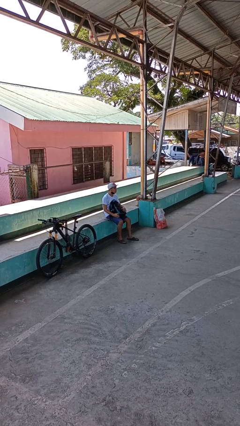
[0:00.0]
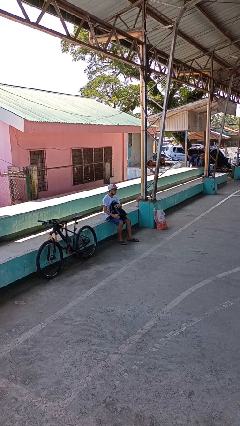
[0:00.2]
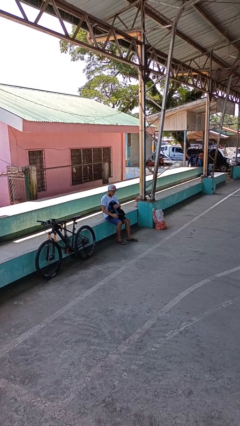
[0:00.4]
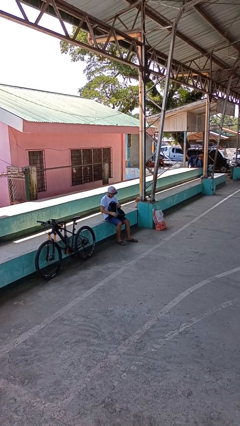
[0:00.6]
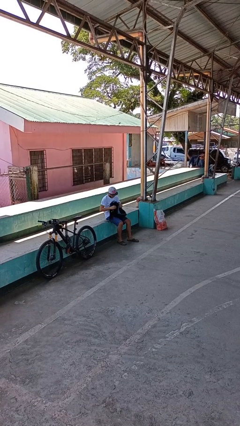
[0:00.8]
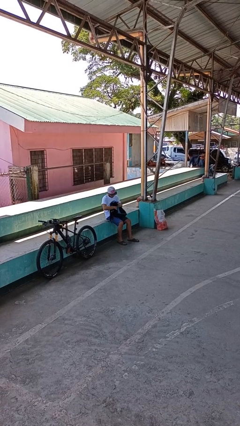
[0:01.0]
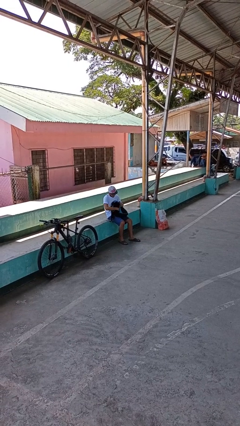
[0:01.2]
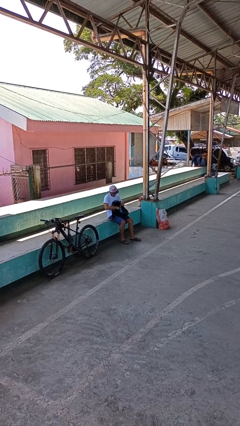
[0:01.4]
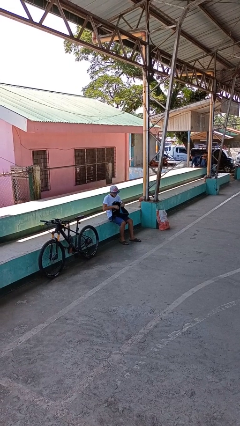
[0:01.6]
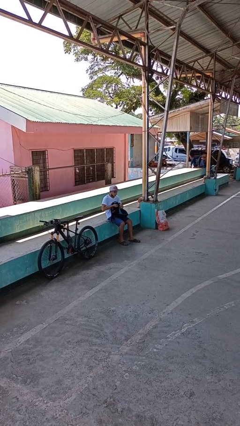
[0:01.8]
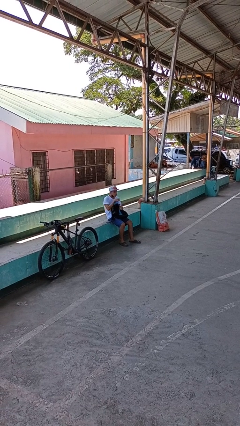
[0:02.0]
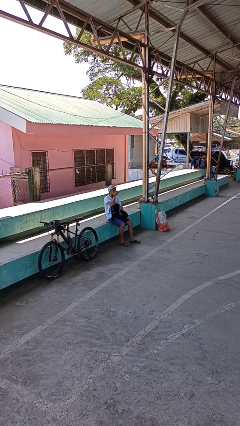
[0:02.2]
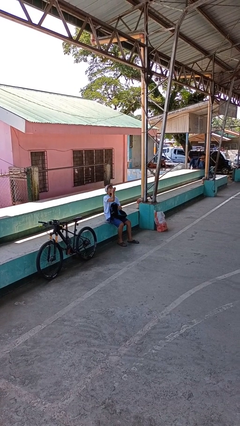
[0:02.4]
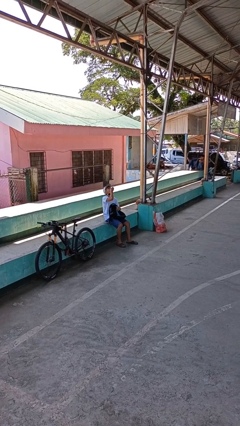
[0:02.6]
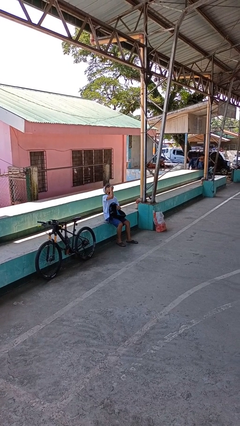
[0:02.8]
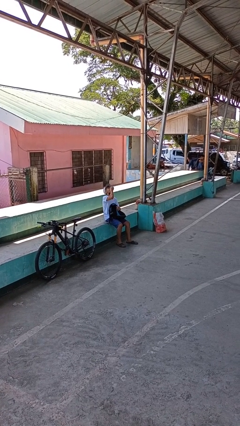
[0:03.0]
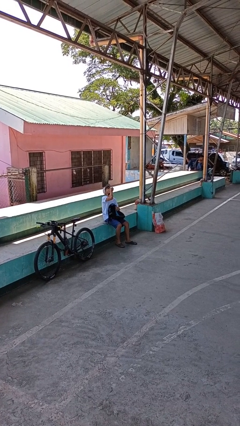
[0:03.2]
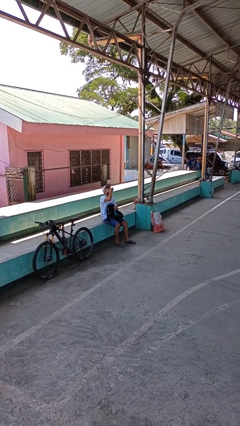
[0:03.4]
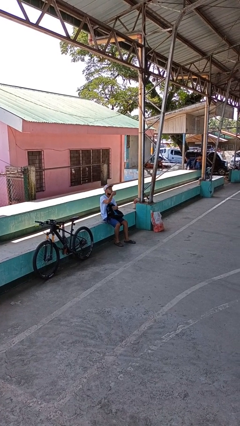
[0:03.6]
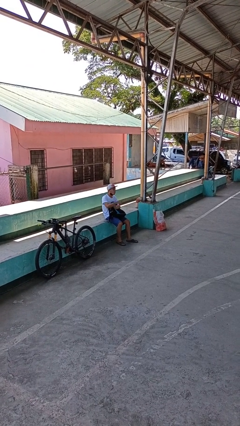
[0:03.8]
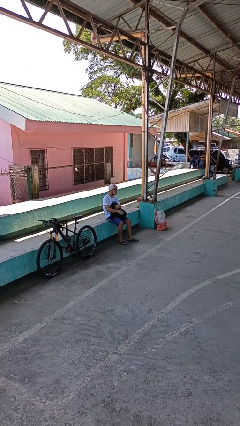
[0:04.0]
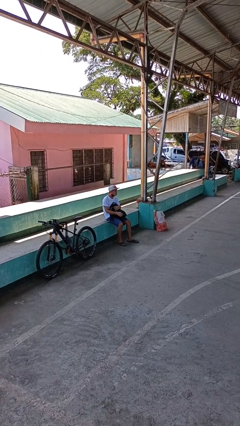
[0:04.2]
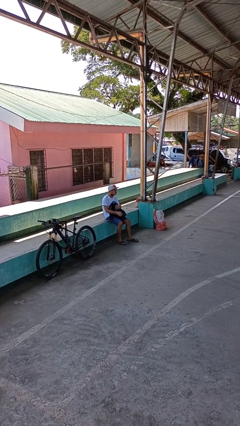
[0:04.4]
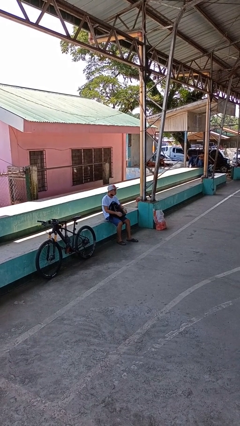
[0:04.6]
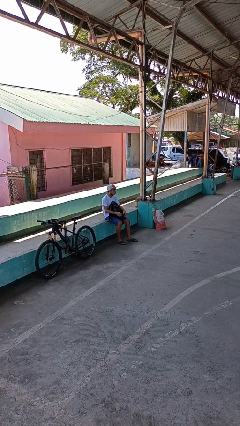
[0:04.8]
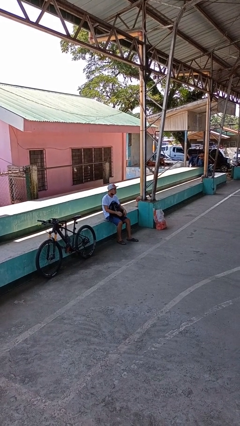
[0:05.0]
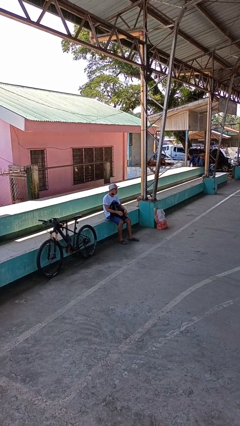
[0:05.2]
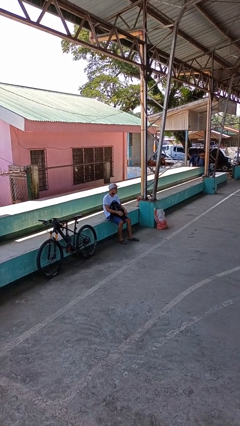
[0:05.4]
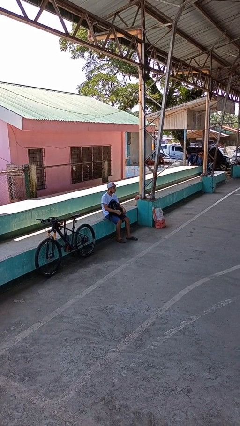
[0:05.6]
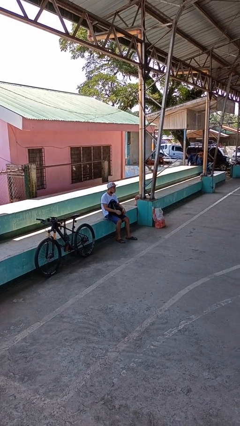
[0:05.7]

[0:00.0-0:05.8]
person eats snack from bag

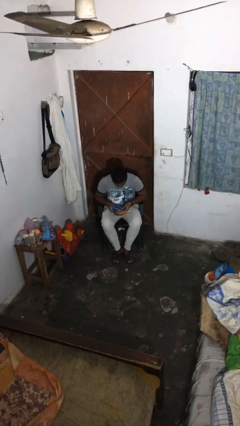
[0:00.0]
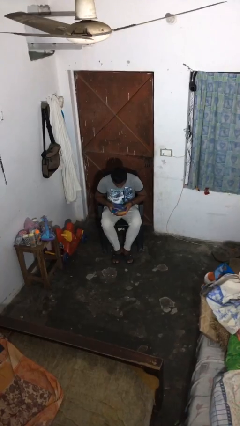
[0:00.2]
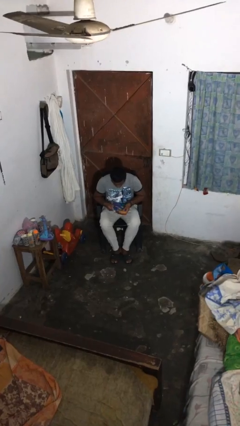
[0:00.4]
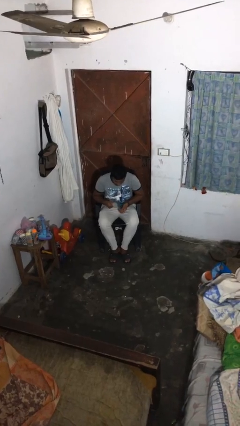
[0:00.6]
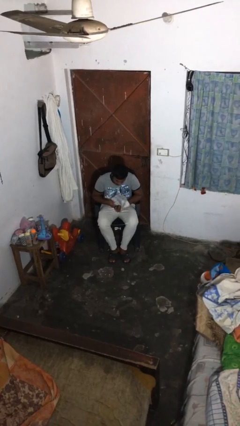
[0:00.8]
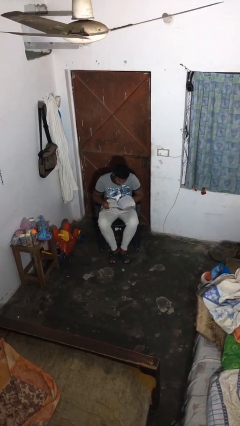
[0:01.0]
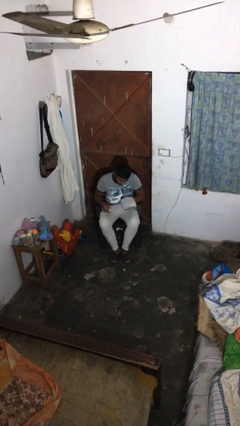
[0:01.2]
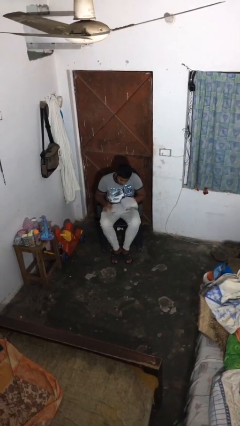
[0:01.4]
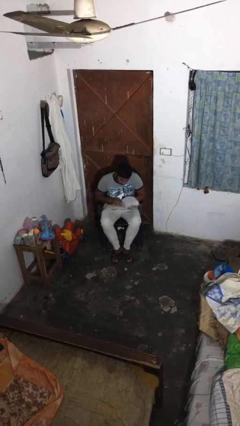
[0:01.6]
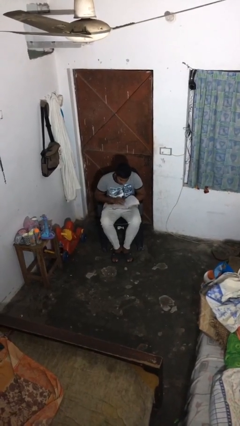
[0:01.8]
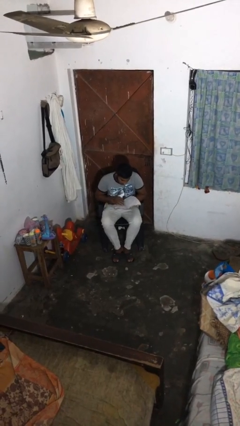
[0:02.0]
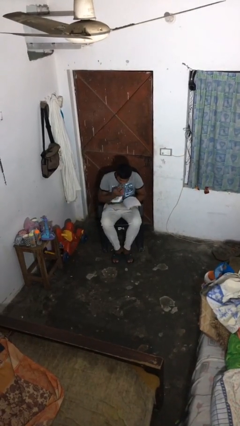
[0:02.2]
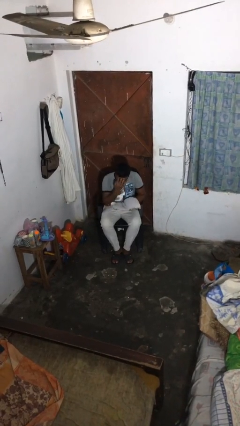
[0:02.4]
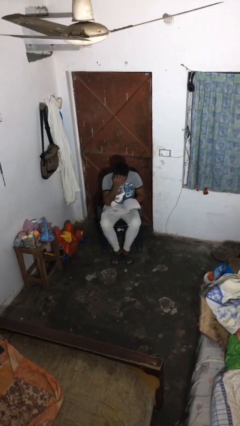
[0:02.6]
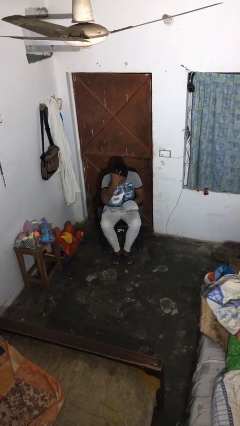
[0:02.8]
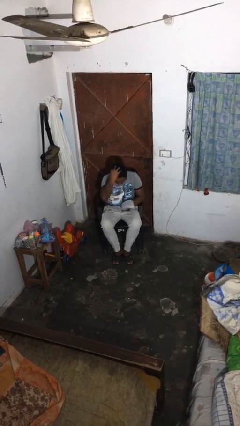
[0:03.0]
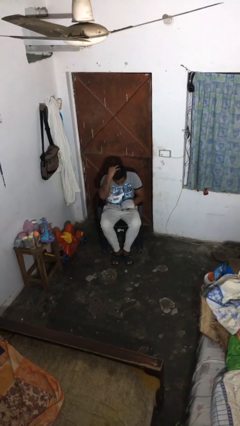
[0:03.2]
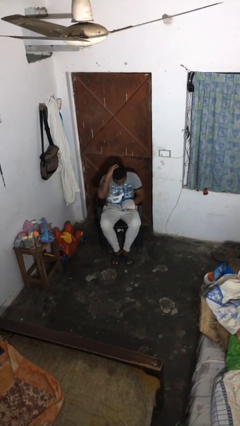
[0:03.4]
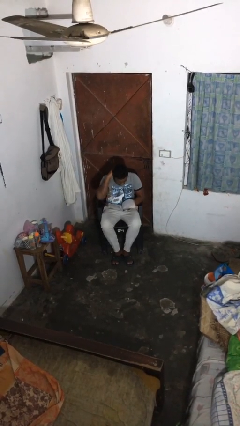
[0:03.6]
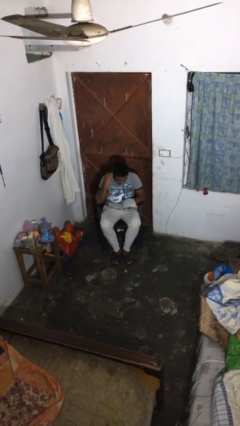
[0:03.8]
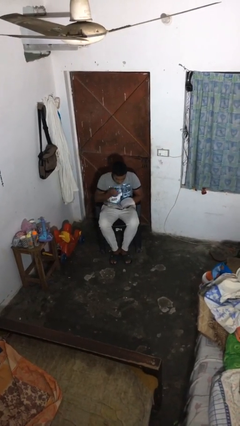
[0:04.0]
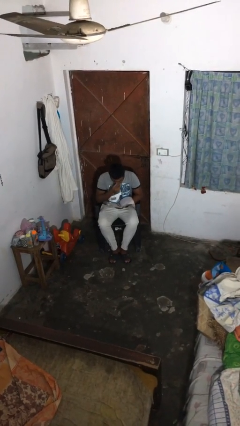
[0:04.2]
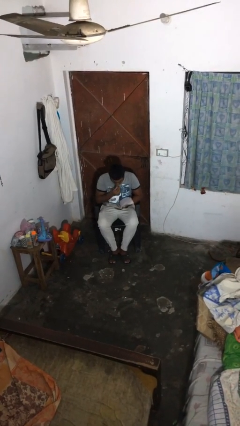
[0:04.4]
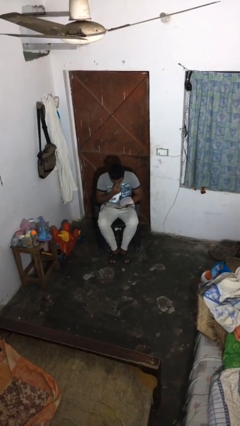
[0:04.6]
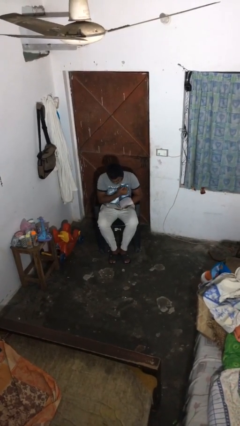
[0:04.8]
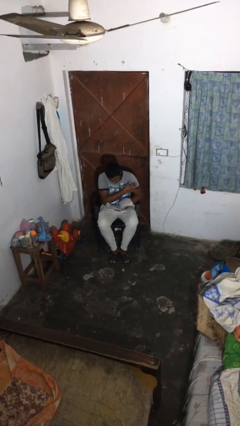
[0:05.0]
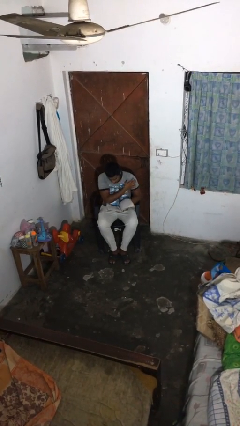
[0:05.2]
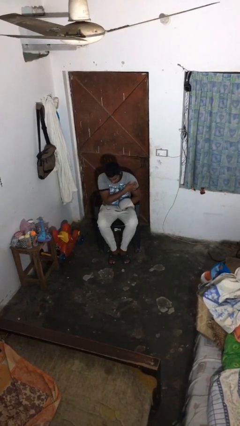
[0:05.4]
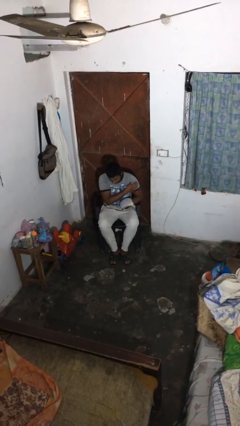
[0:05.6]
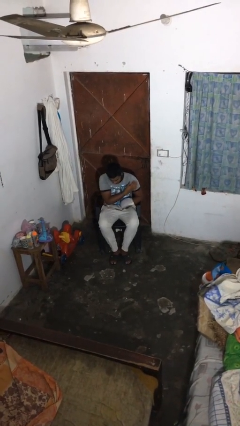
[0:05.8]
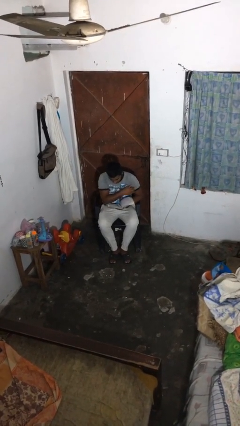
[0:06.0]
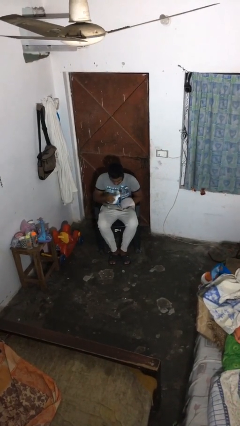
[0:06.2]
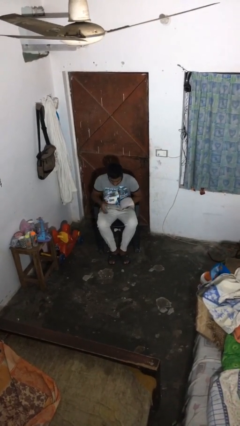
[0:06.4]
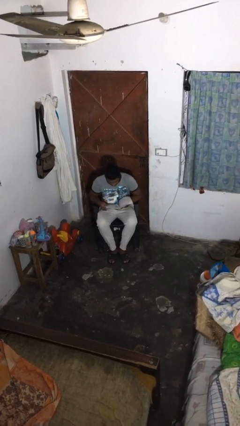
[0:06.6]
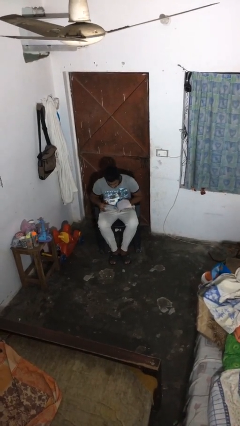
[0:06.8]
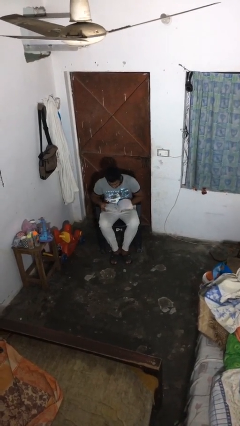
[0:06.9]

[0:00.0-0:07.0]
person reads document

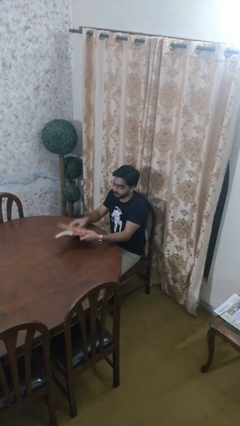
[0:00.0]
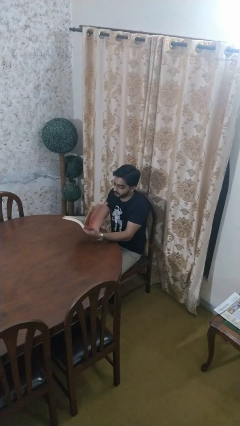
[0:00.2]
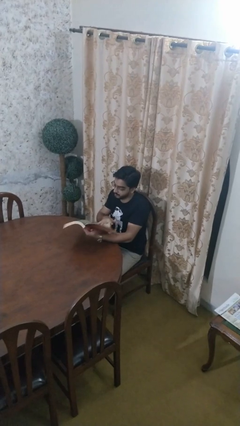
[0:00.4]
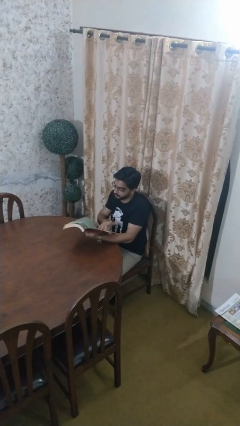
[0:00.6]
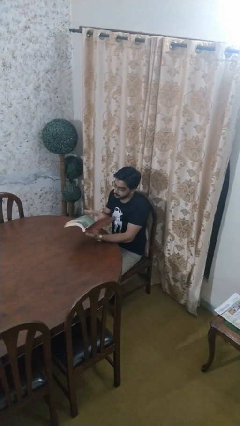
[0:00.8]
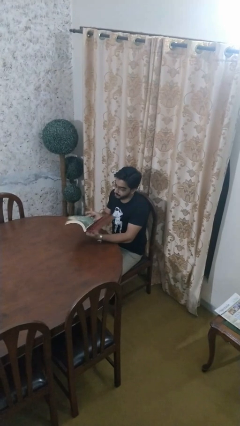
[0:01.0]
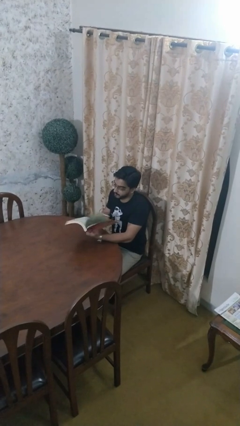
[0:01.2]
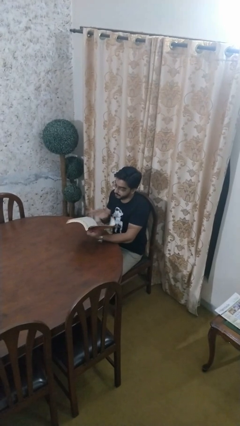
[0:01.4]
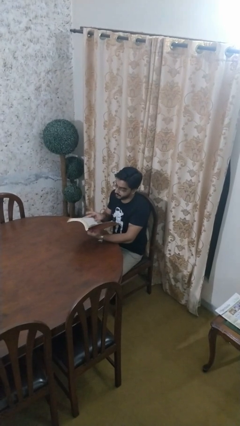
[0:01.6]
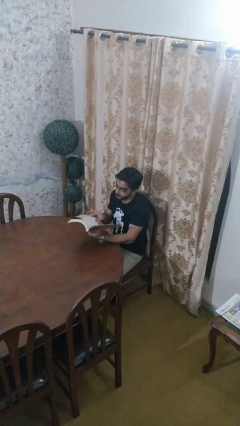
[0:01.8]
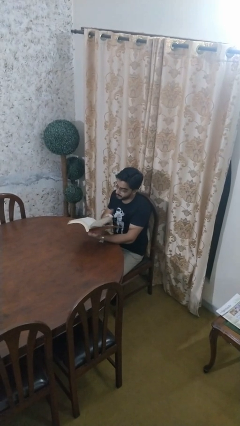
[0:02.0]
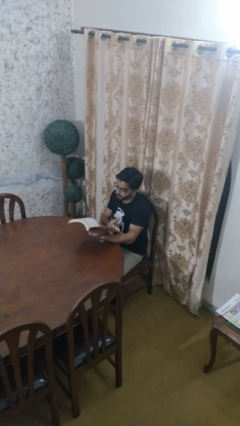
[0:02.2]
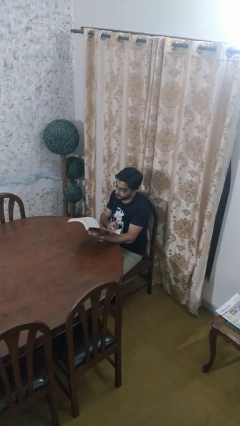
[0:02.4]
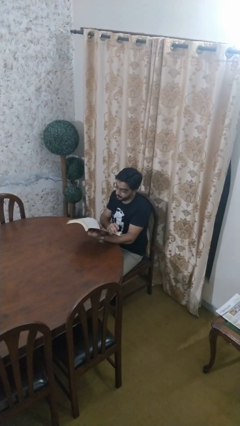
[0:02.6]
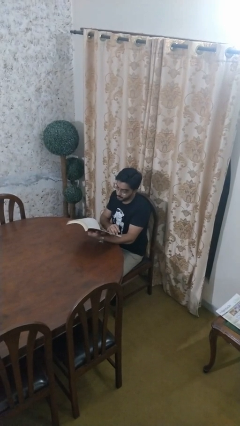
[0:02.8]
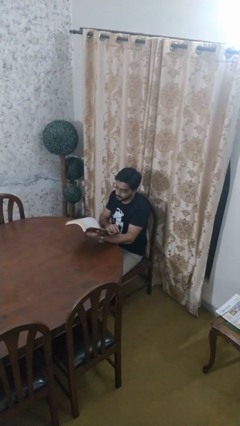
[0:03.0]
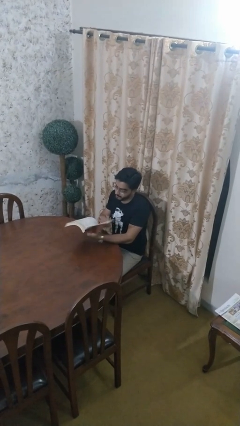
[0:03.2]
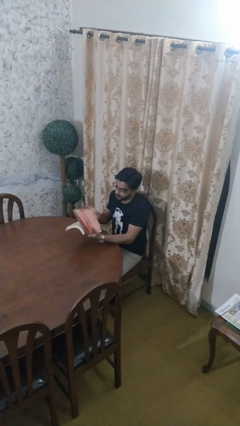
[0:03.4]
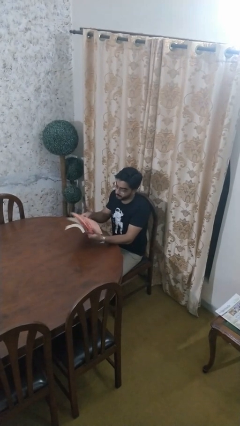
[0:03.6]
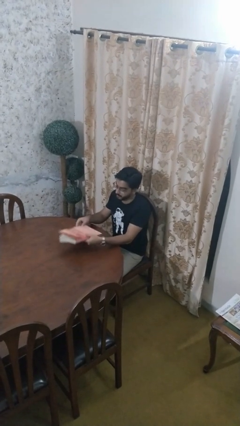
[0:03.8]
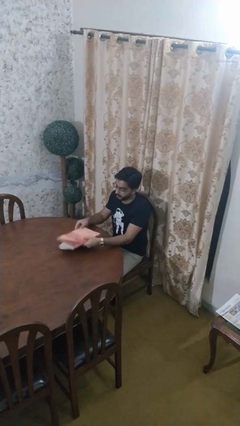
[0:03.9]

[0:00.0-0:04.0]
person reads book

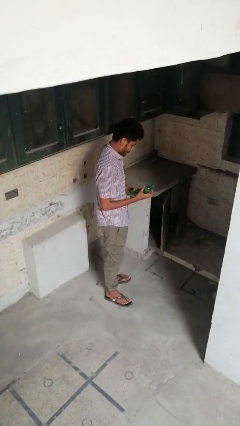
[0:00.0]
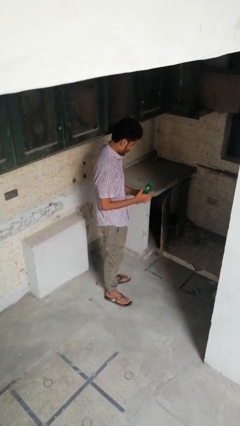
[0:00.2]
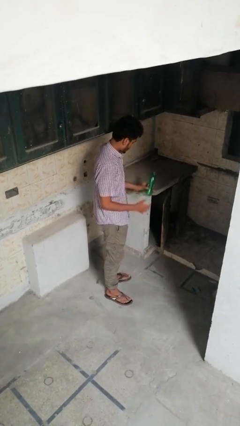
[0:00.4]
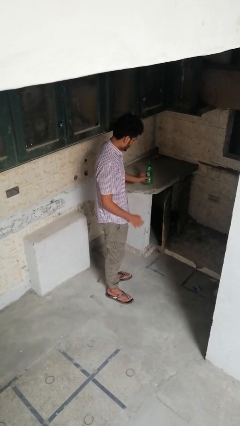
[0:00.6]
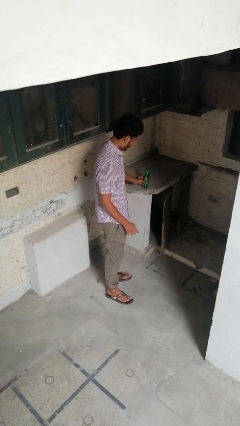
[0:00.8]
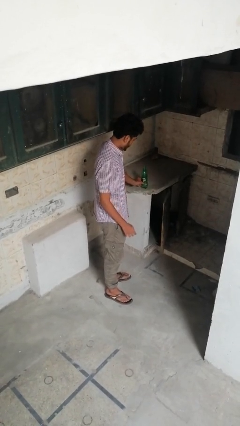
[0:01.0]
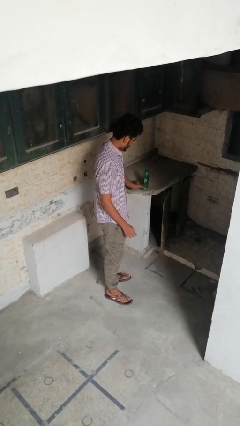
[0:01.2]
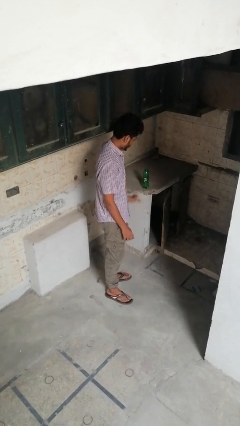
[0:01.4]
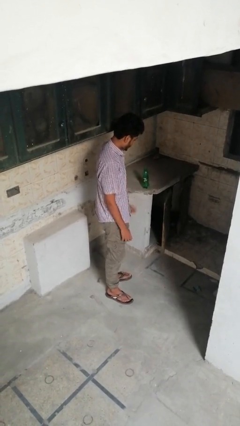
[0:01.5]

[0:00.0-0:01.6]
person puts down object on countertop
